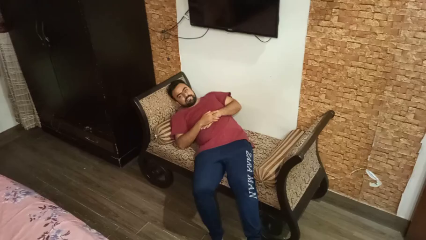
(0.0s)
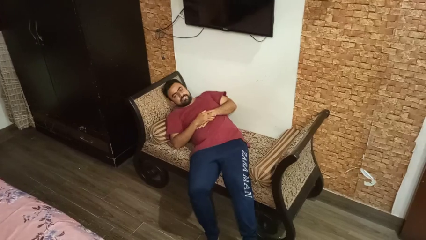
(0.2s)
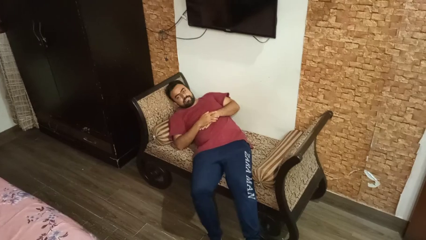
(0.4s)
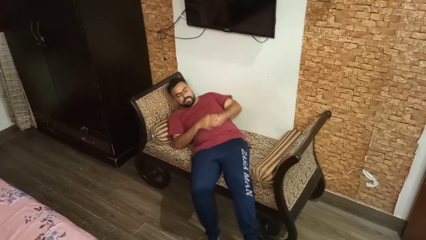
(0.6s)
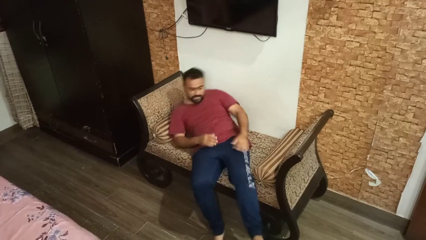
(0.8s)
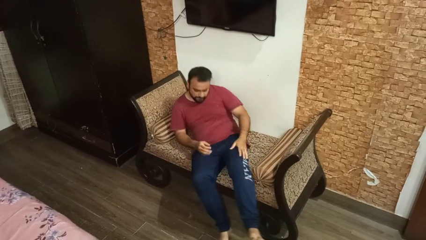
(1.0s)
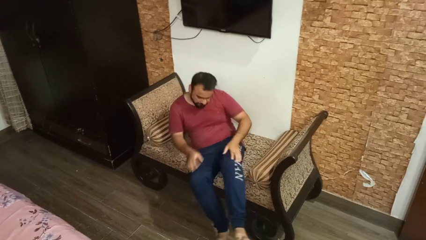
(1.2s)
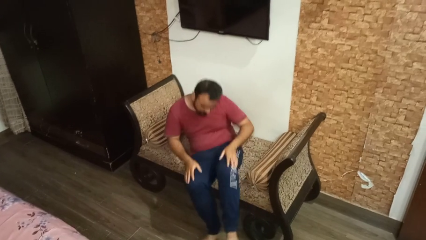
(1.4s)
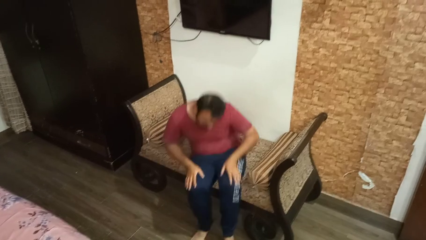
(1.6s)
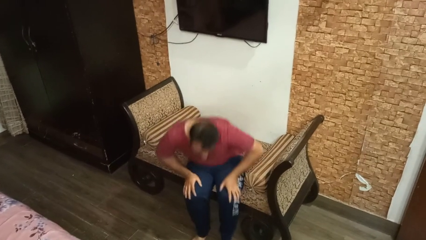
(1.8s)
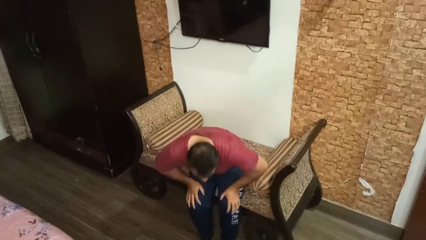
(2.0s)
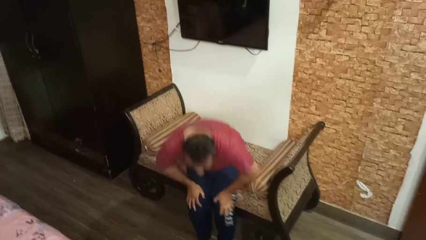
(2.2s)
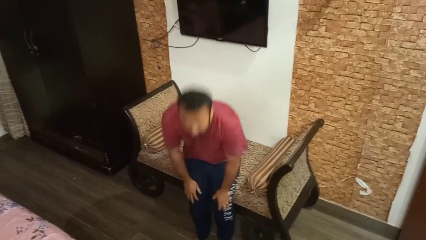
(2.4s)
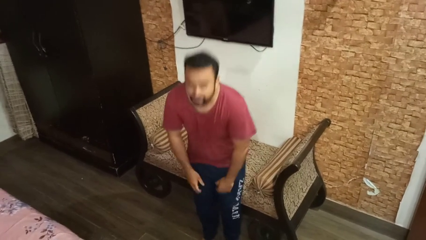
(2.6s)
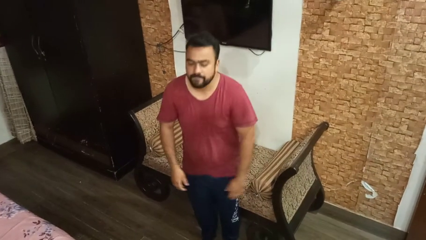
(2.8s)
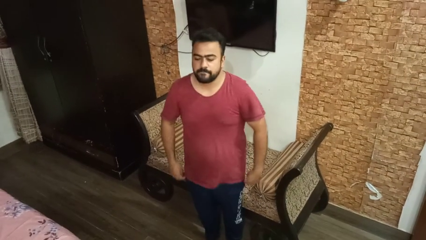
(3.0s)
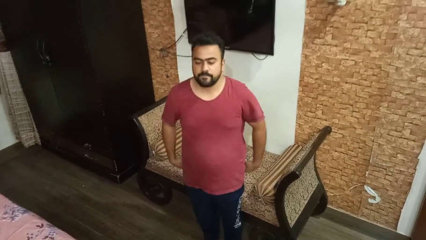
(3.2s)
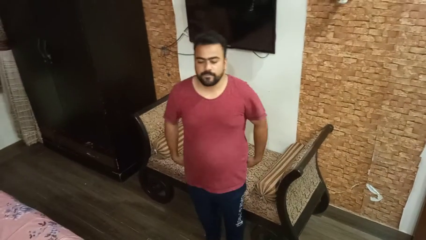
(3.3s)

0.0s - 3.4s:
person stands up

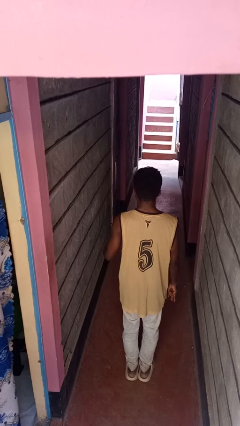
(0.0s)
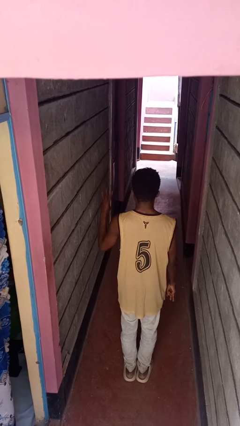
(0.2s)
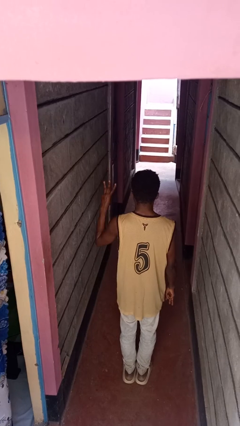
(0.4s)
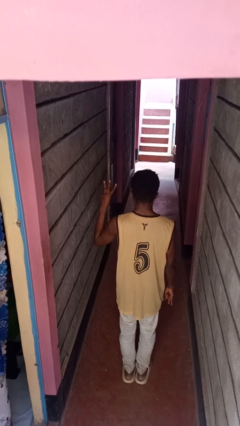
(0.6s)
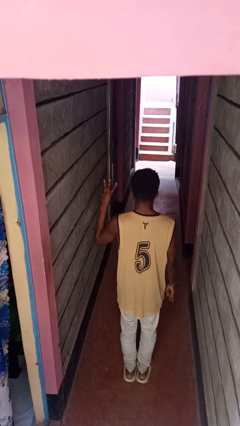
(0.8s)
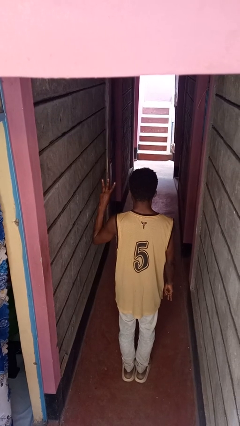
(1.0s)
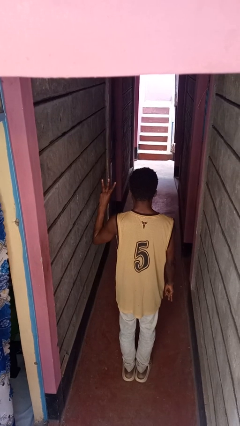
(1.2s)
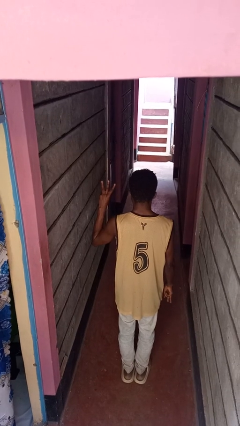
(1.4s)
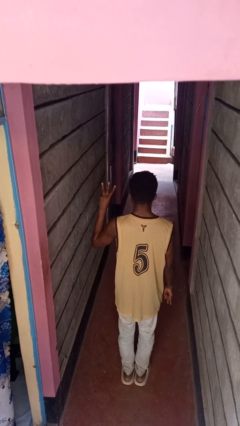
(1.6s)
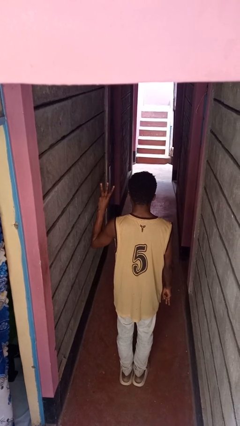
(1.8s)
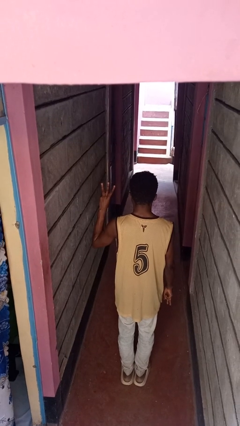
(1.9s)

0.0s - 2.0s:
person gestures number three

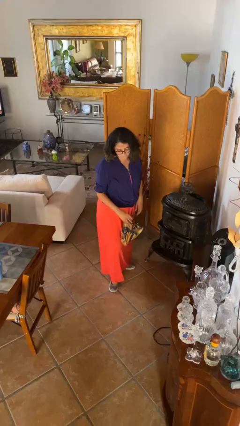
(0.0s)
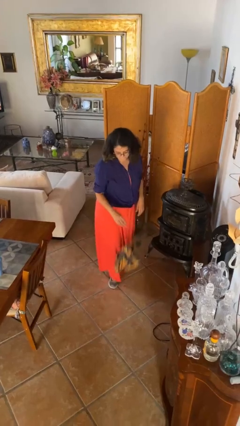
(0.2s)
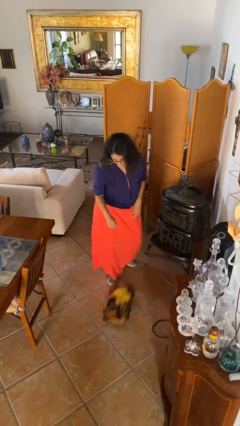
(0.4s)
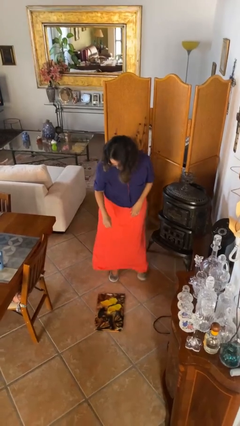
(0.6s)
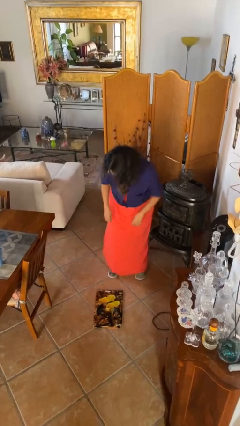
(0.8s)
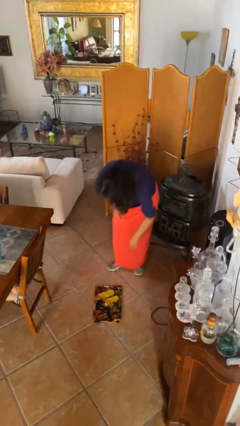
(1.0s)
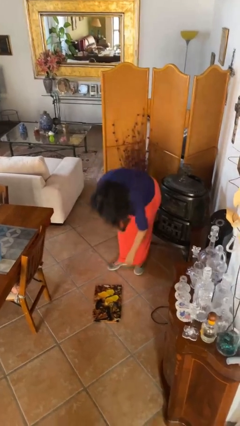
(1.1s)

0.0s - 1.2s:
person drops object

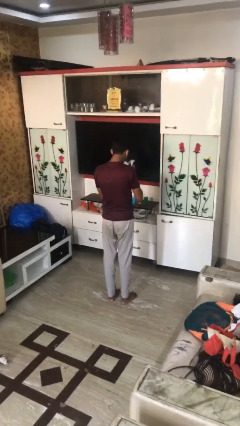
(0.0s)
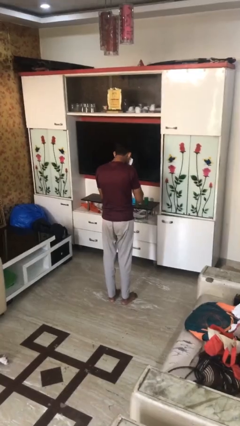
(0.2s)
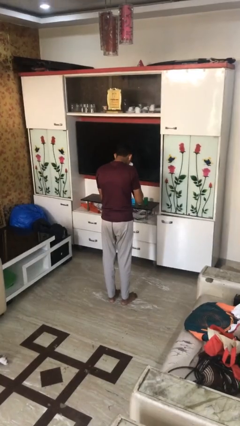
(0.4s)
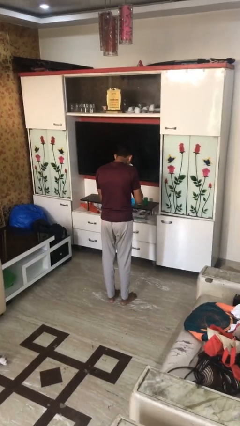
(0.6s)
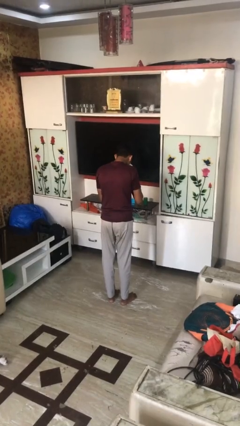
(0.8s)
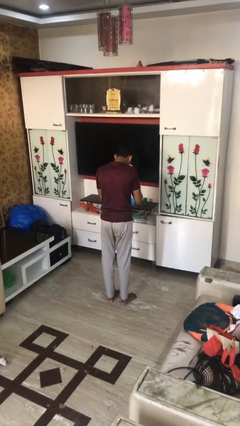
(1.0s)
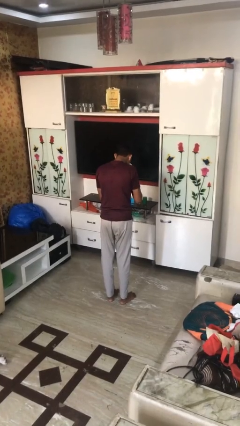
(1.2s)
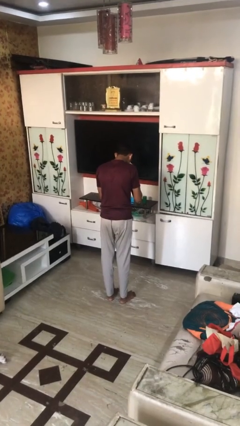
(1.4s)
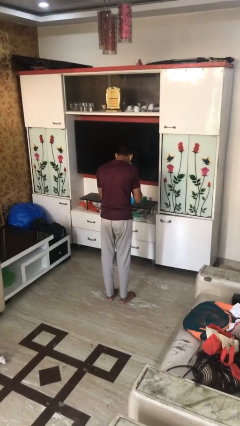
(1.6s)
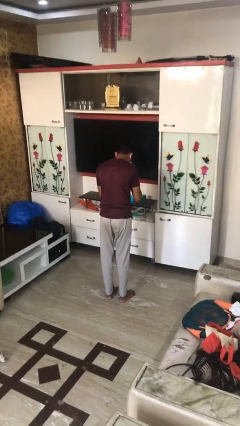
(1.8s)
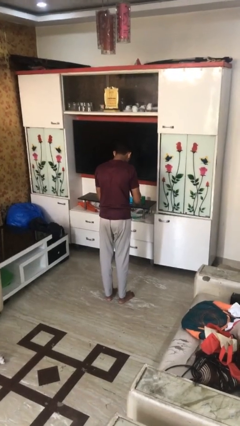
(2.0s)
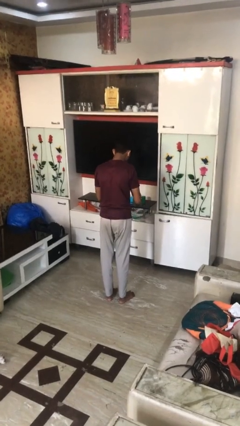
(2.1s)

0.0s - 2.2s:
person blows nose

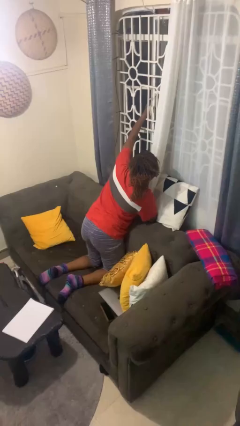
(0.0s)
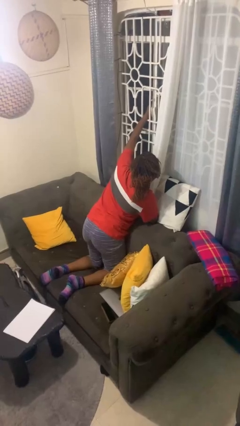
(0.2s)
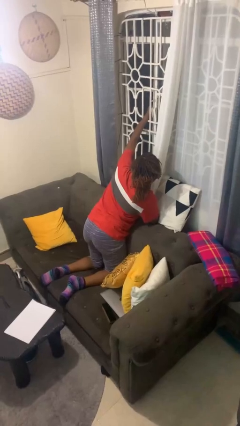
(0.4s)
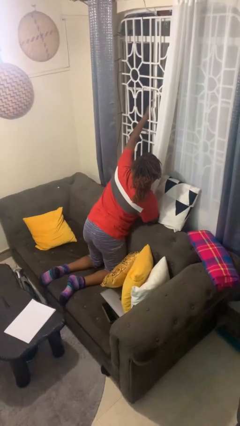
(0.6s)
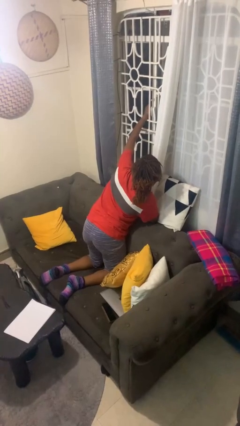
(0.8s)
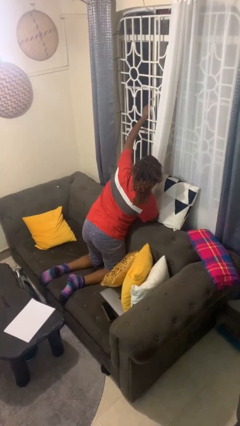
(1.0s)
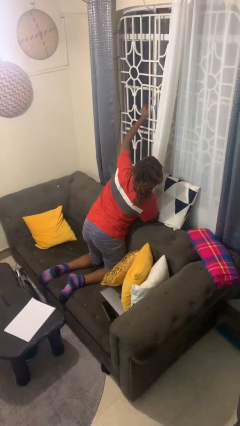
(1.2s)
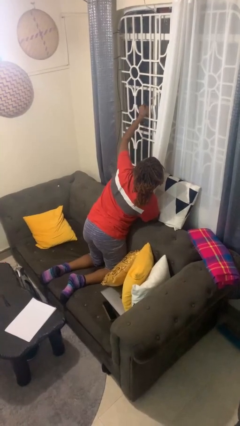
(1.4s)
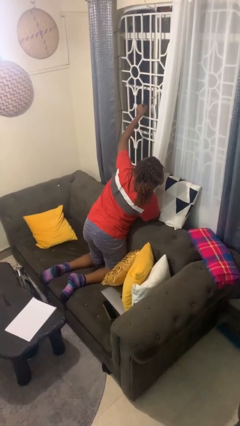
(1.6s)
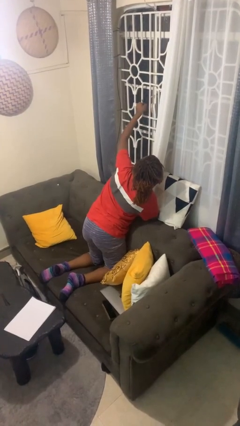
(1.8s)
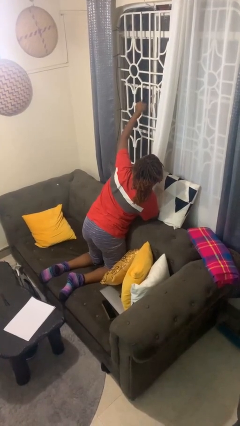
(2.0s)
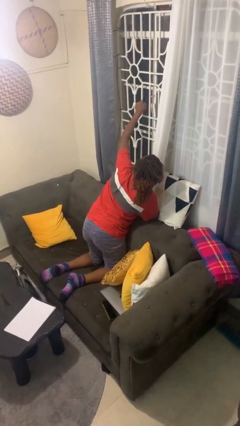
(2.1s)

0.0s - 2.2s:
person closes home window

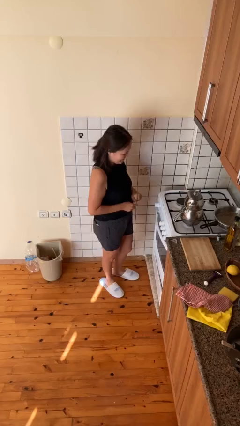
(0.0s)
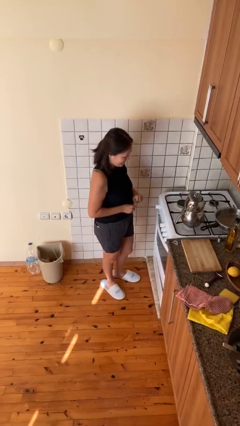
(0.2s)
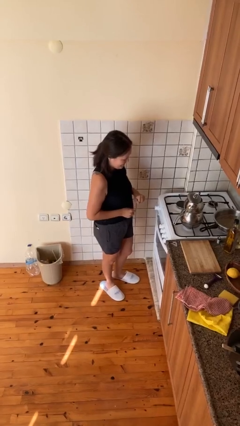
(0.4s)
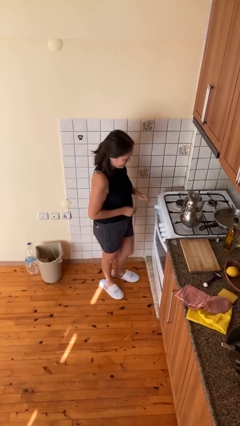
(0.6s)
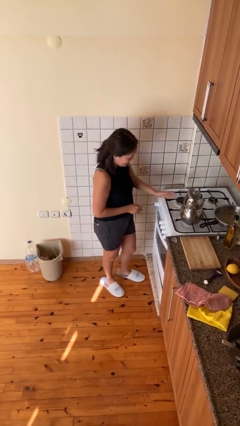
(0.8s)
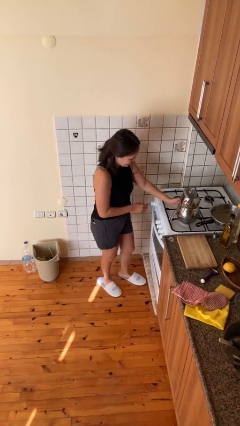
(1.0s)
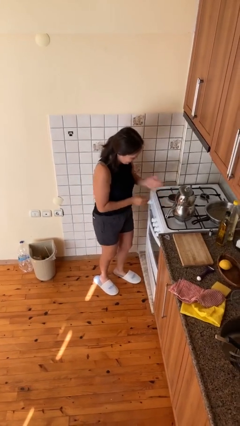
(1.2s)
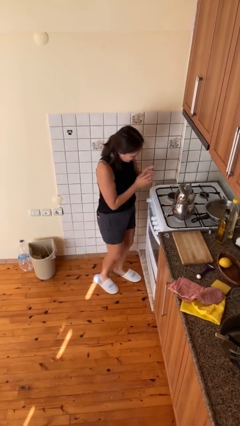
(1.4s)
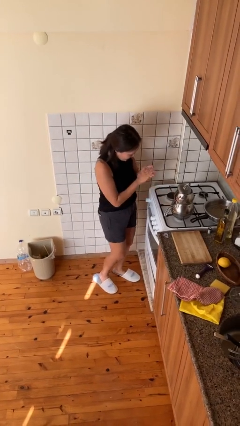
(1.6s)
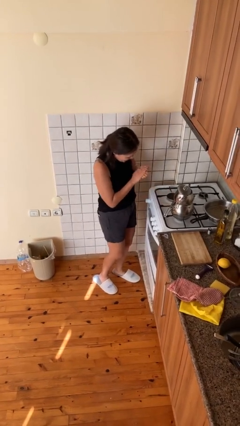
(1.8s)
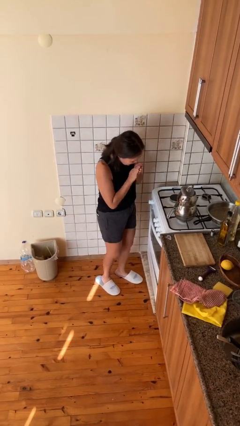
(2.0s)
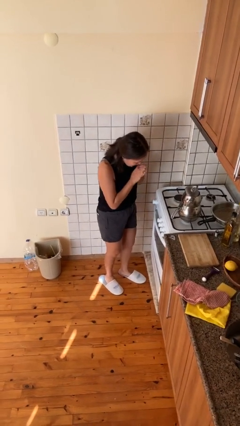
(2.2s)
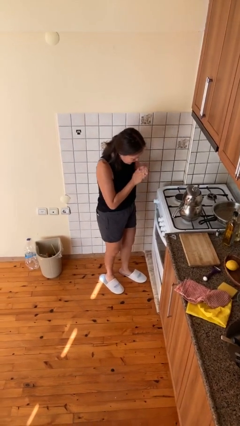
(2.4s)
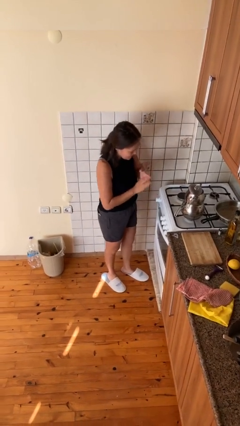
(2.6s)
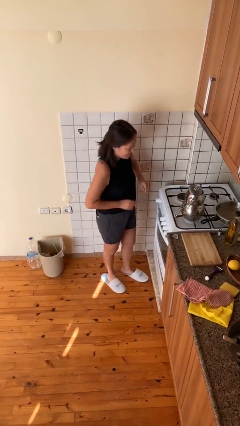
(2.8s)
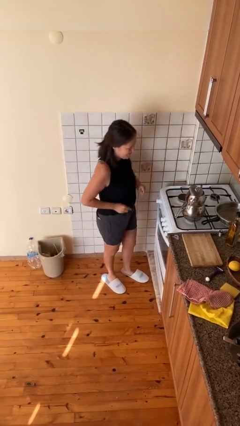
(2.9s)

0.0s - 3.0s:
person burns hand

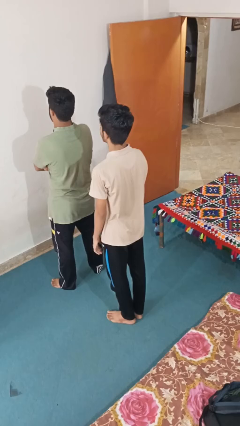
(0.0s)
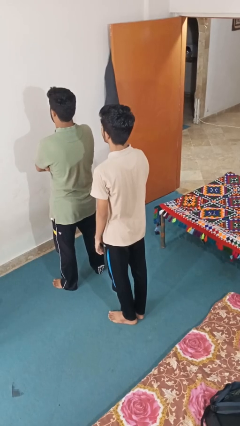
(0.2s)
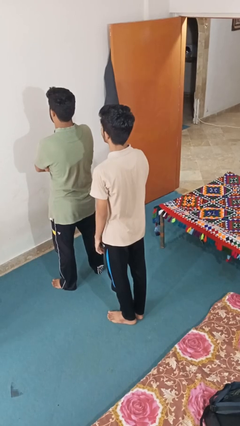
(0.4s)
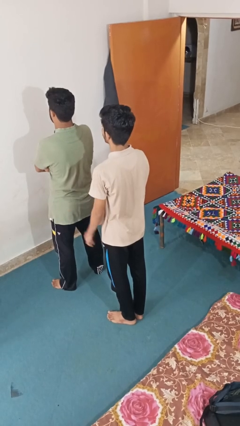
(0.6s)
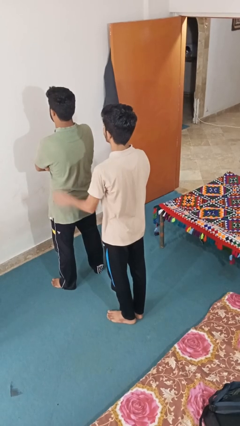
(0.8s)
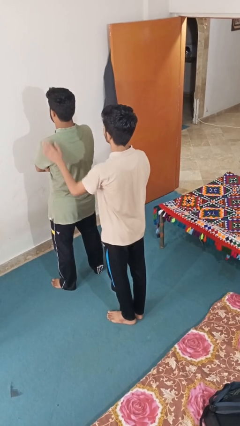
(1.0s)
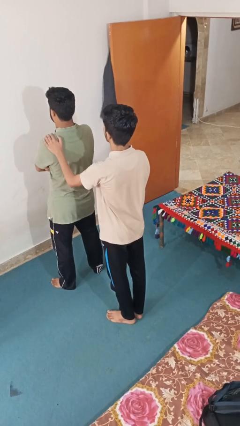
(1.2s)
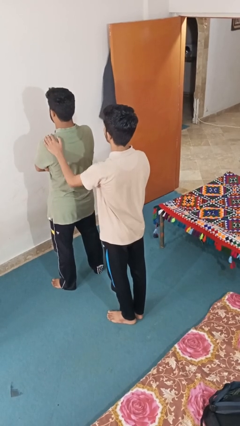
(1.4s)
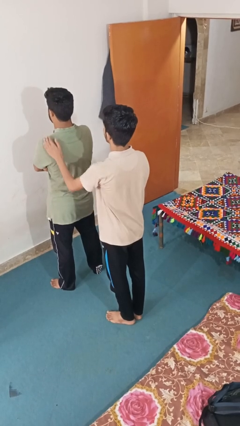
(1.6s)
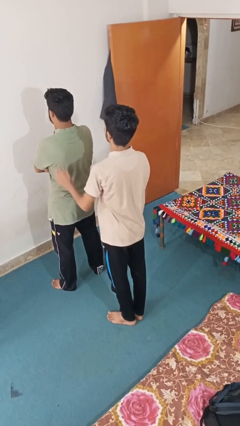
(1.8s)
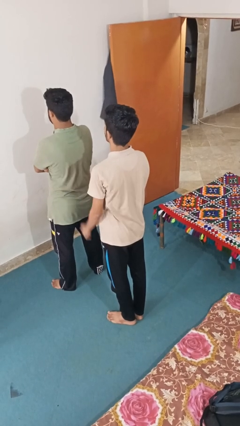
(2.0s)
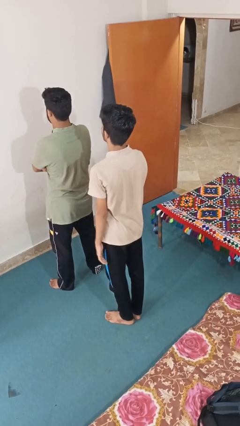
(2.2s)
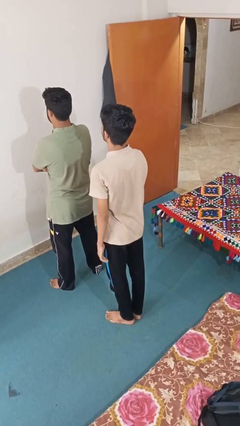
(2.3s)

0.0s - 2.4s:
person touches back of person

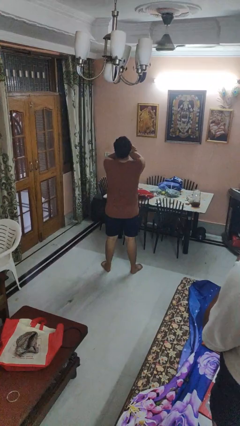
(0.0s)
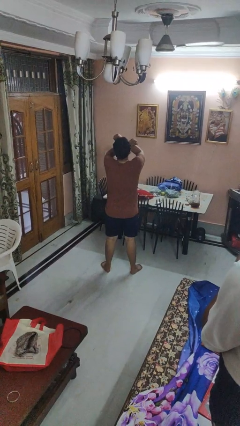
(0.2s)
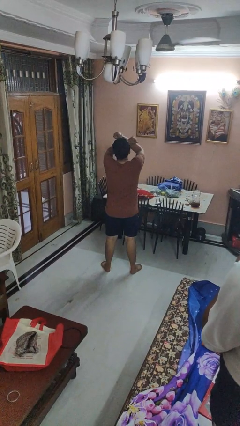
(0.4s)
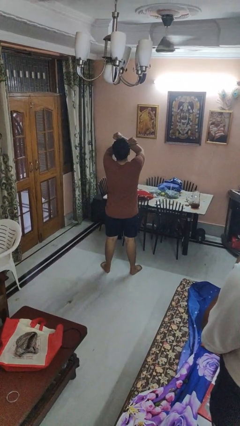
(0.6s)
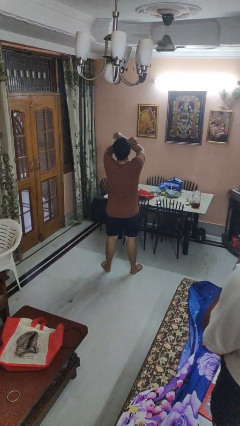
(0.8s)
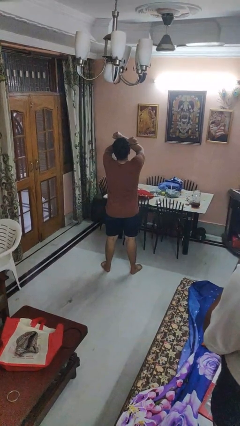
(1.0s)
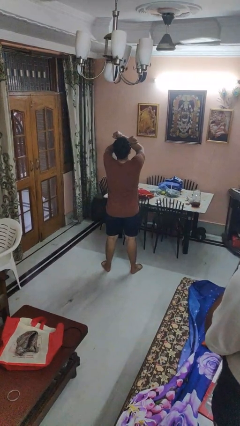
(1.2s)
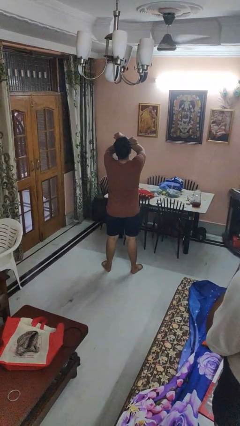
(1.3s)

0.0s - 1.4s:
person gestures arms x
